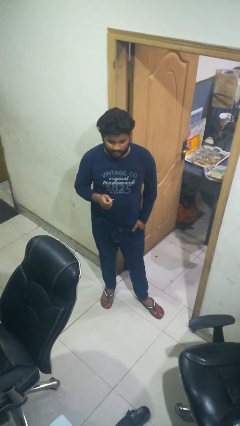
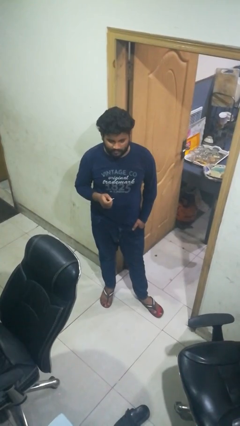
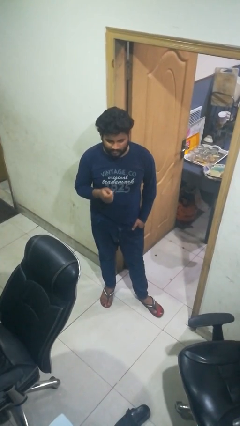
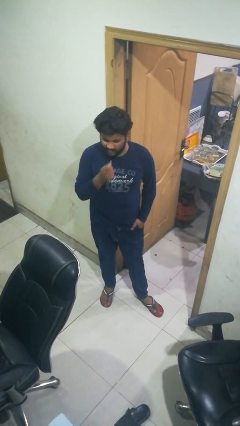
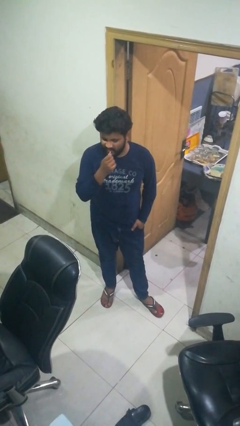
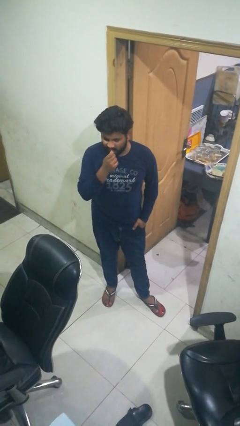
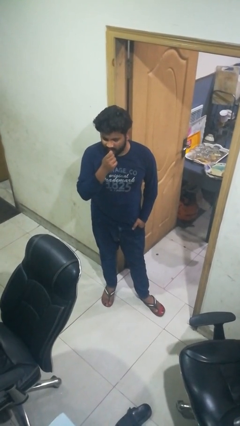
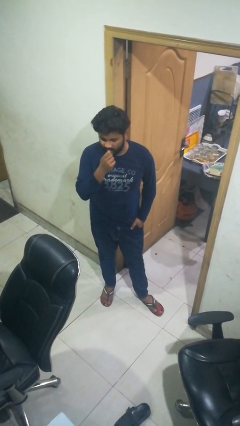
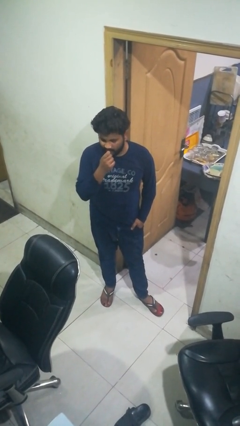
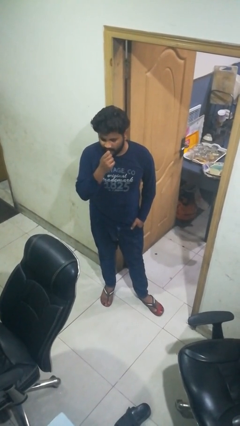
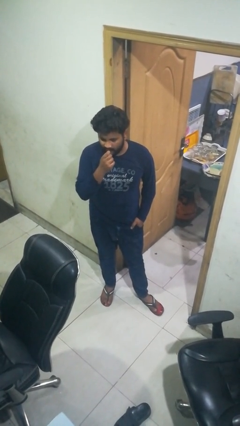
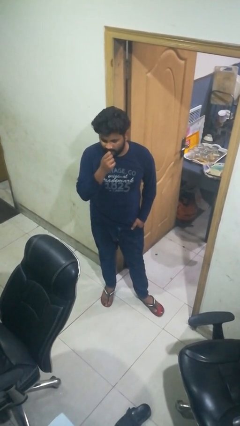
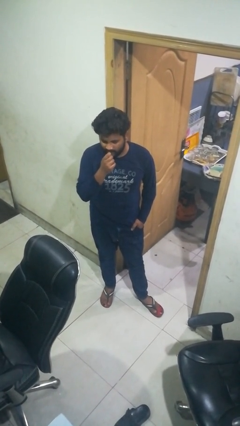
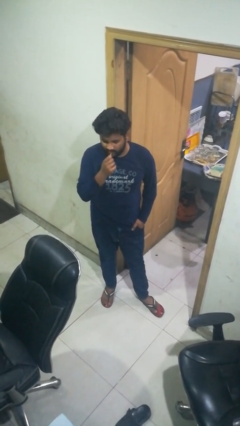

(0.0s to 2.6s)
person flosses

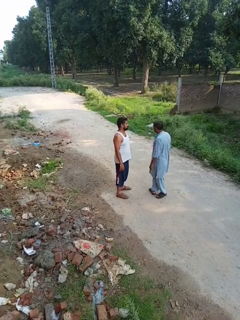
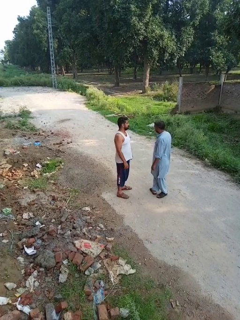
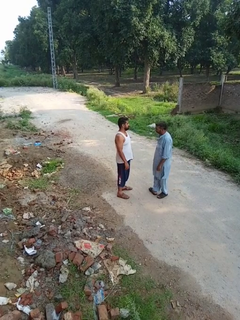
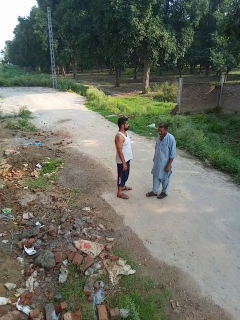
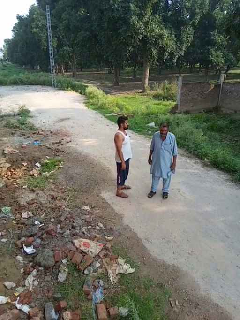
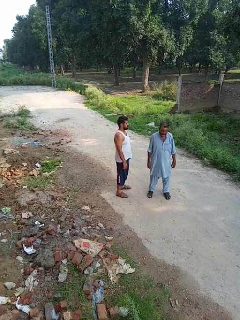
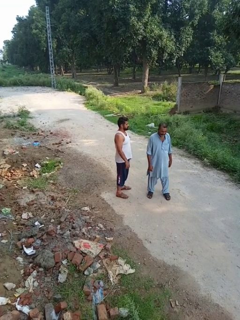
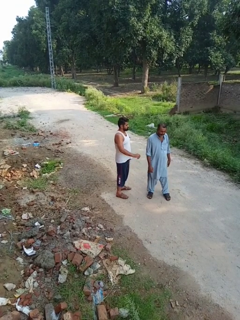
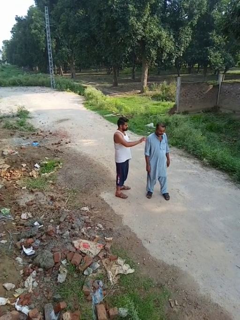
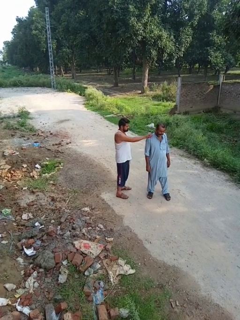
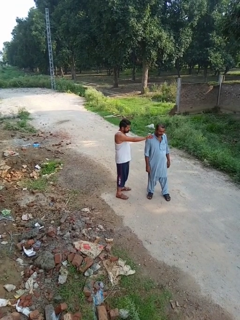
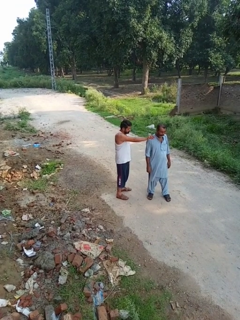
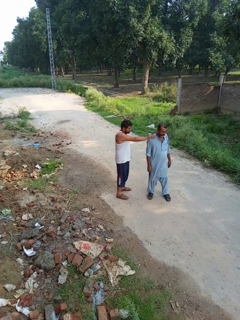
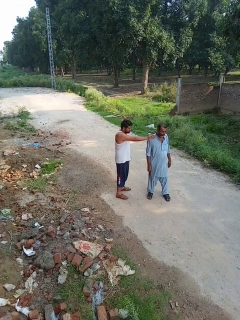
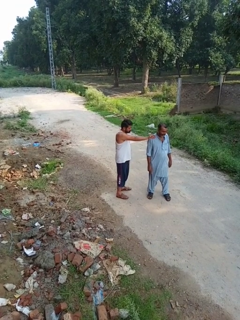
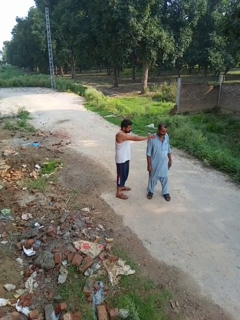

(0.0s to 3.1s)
person grabs person by shoulder

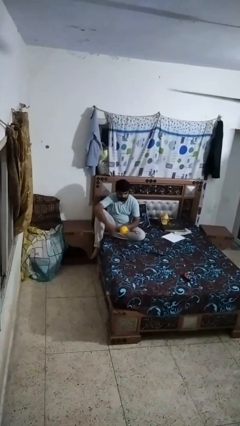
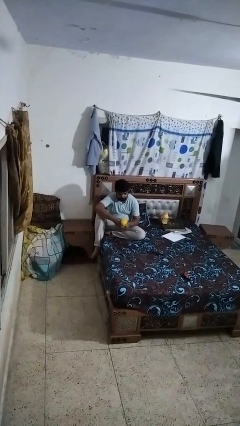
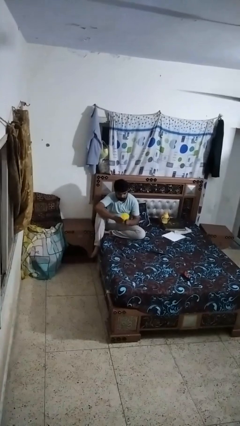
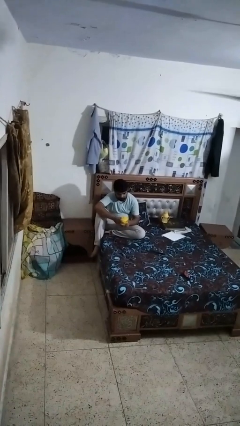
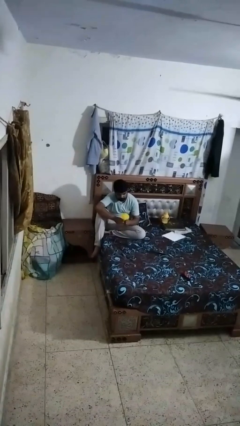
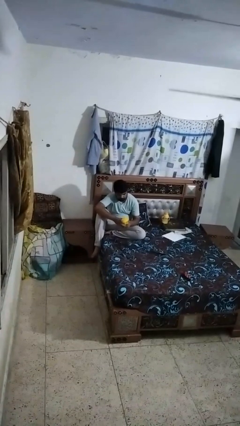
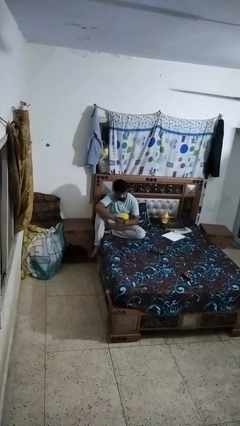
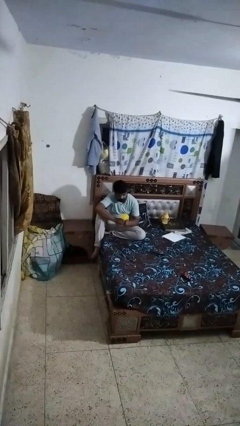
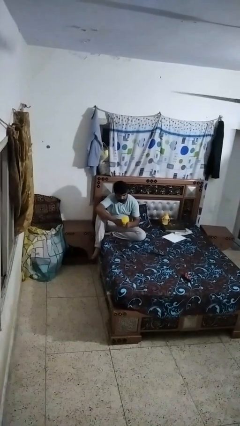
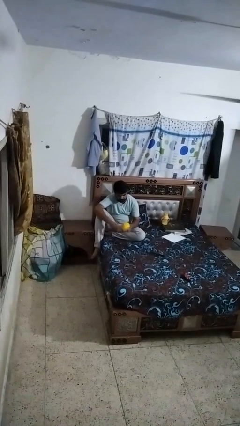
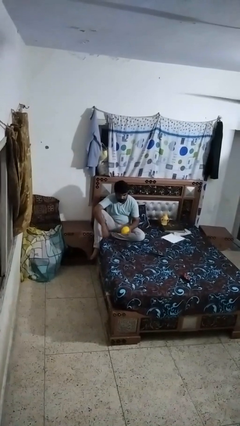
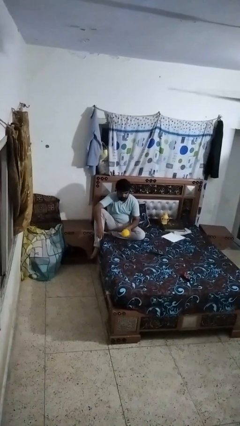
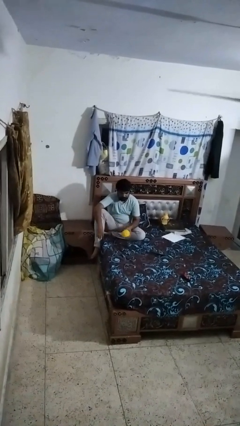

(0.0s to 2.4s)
person squeezes object

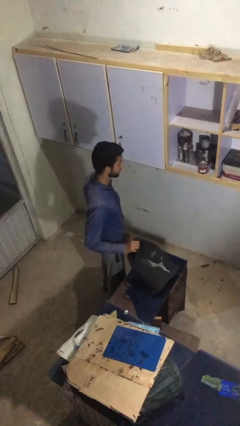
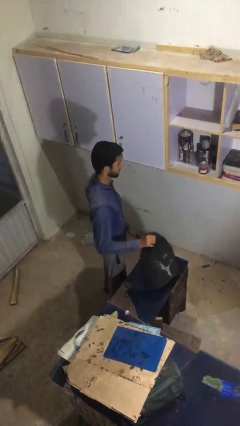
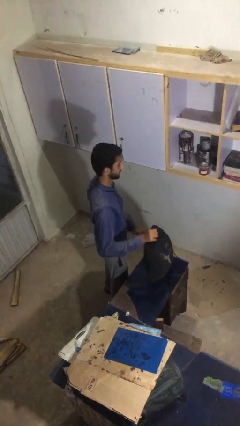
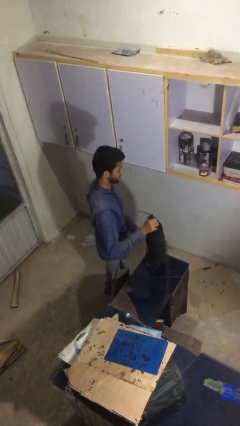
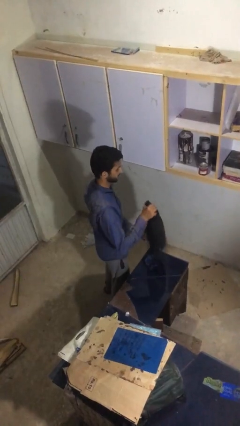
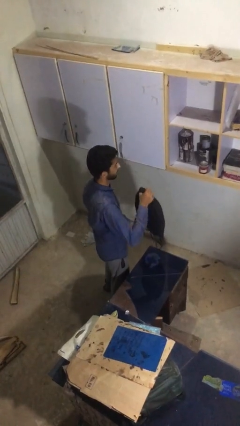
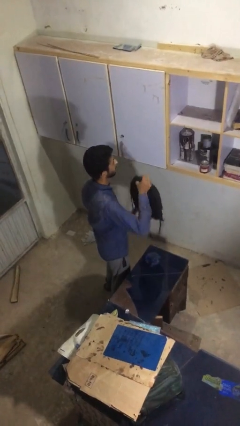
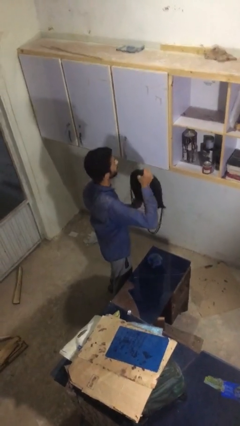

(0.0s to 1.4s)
person picks up object from table

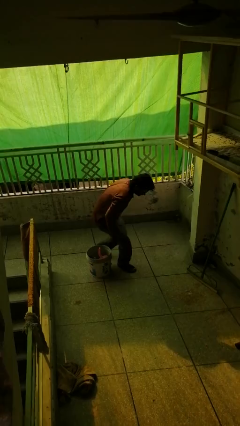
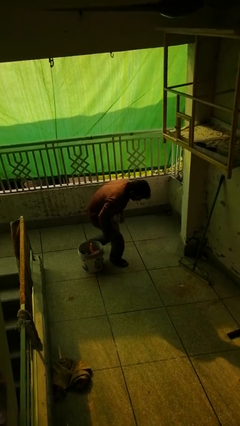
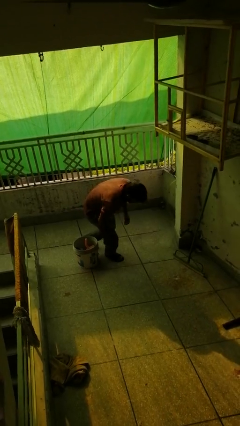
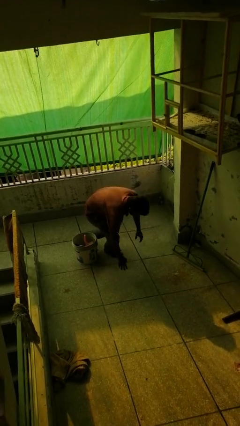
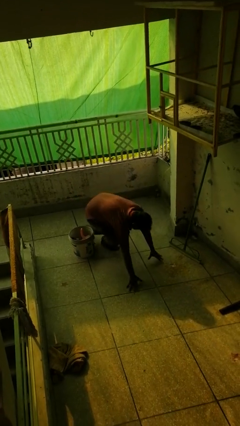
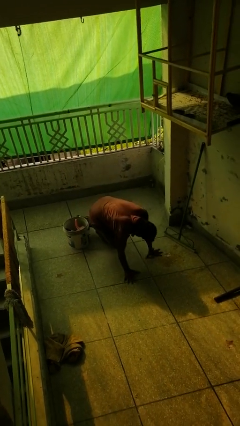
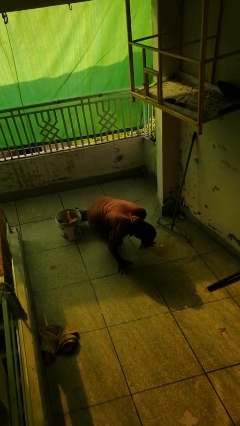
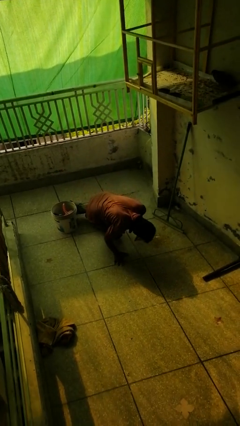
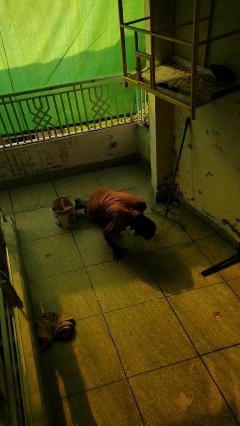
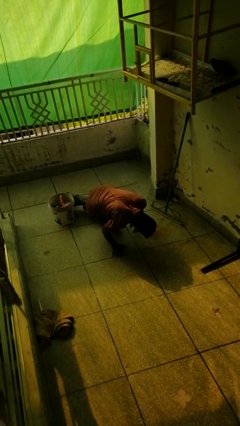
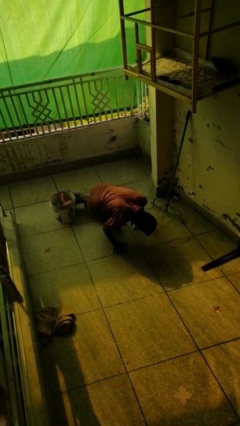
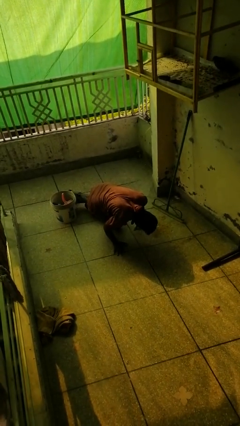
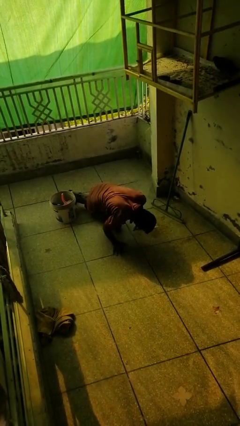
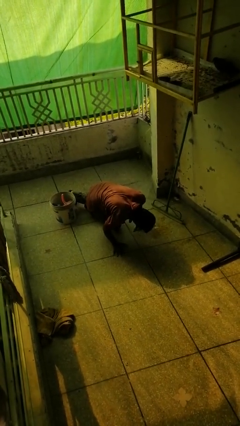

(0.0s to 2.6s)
person lies down on floor

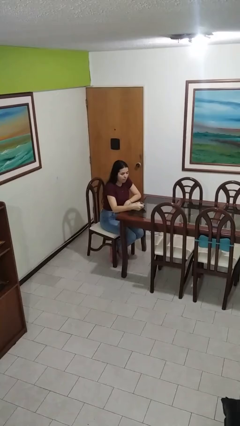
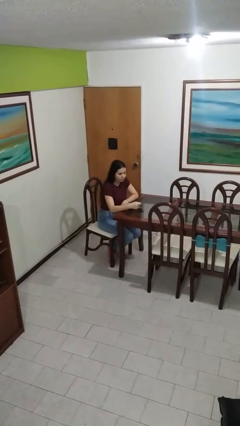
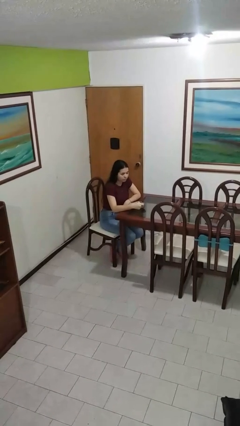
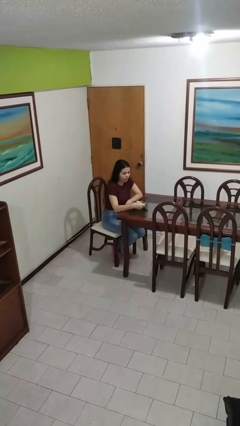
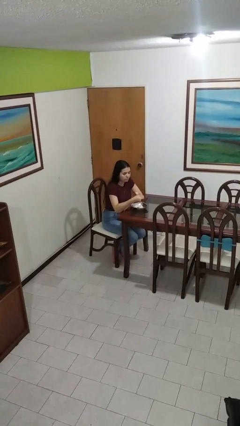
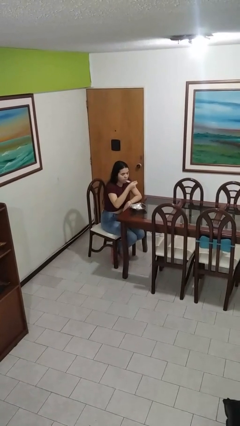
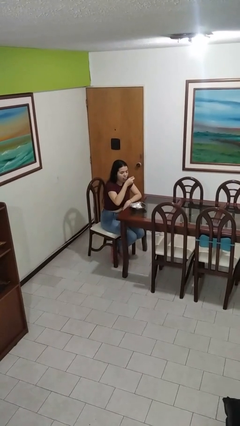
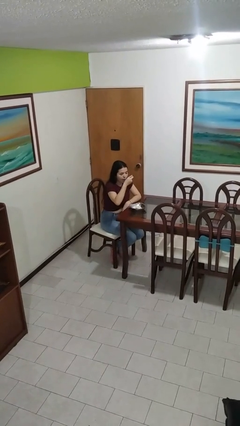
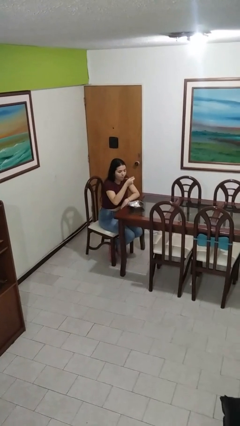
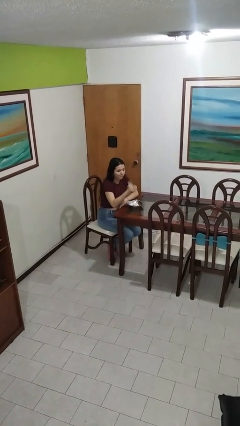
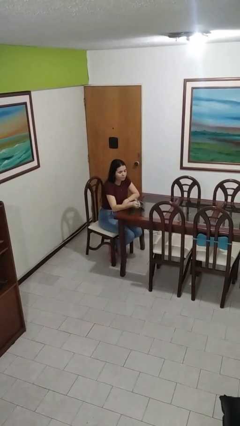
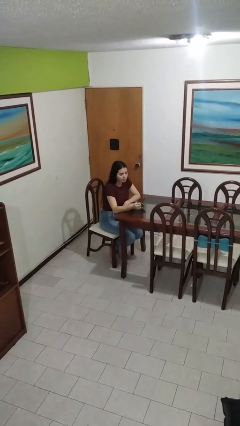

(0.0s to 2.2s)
person eats with utensil

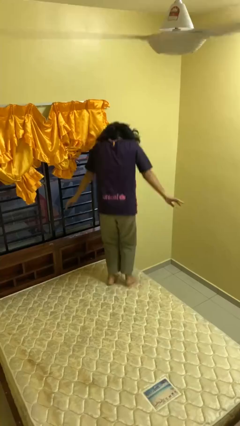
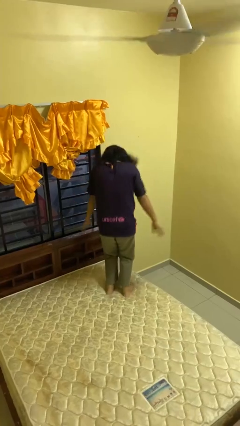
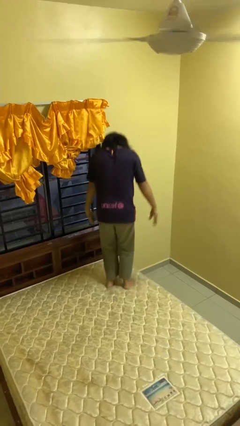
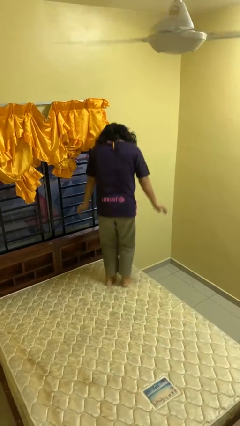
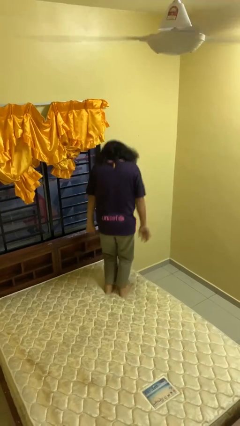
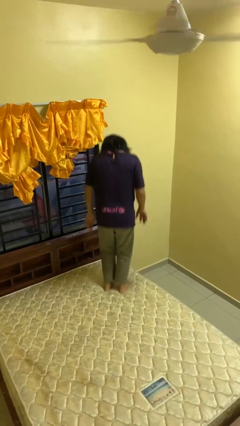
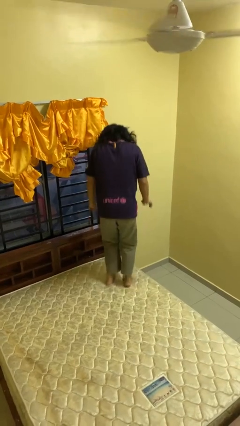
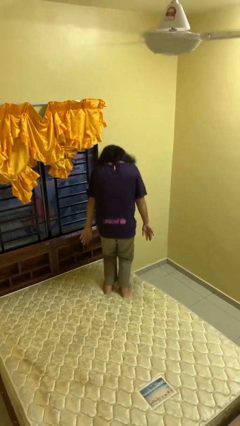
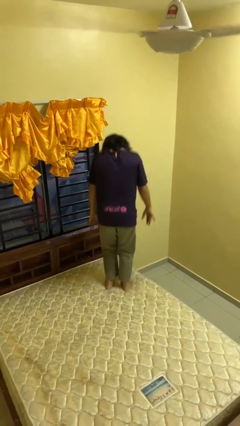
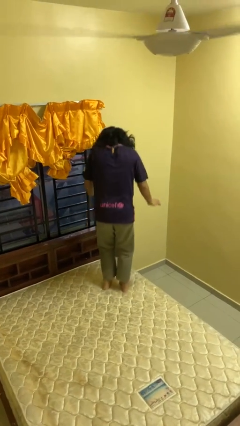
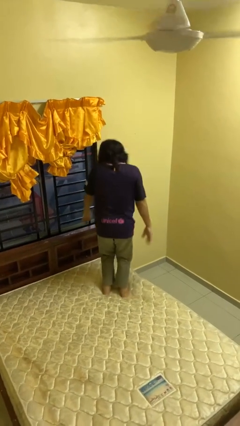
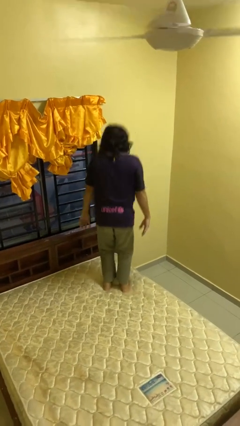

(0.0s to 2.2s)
person jumps on bed

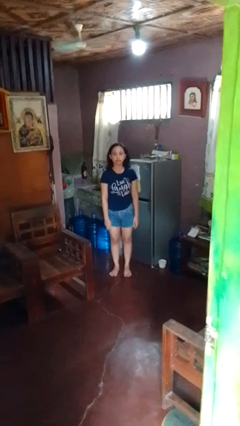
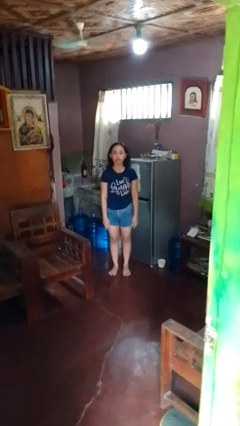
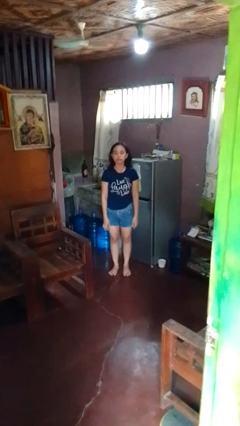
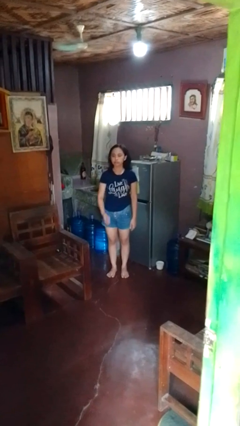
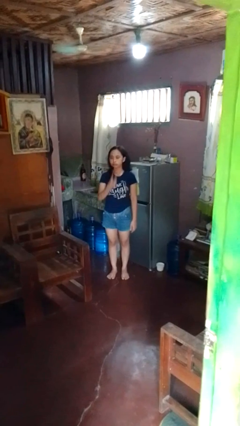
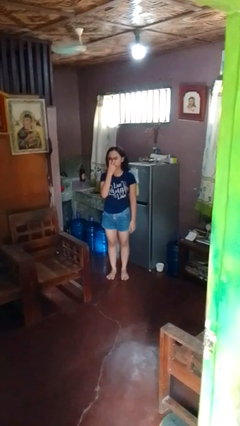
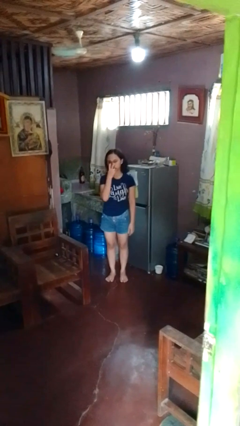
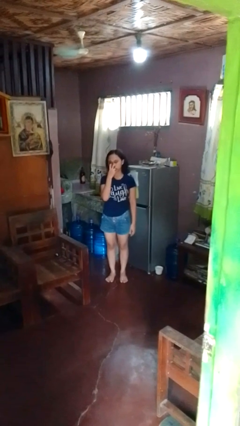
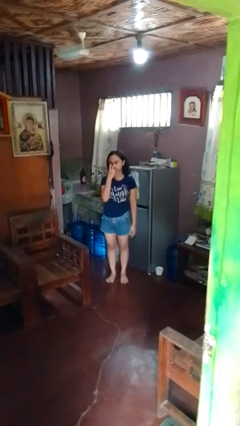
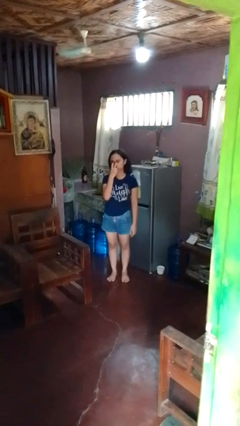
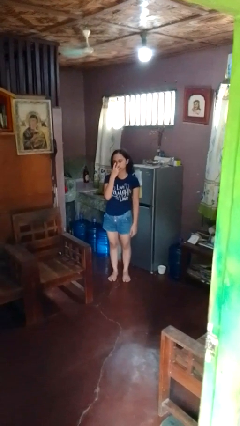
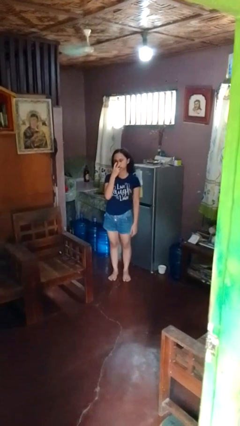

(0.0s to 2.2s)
person gestures watch closely
